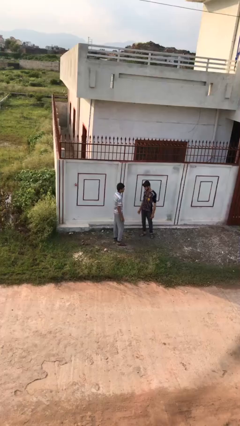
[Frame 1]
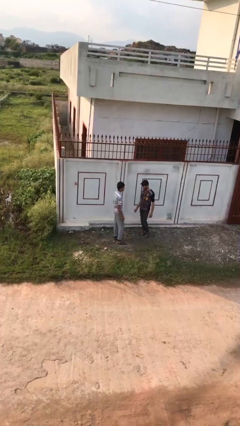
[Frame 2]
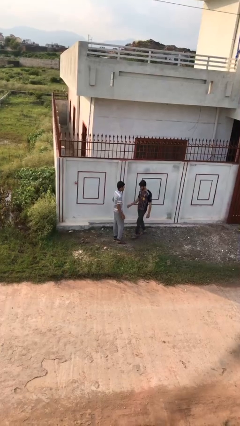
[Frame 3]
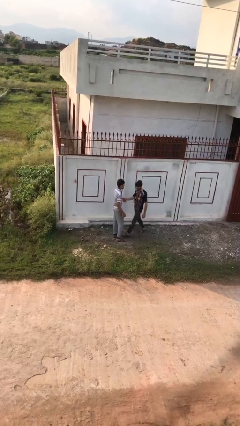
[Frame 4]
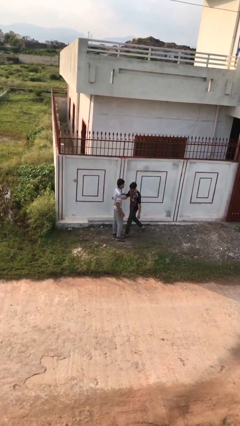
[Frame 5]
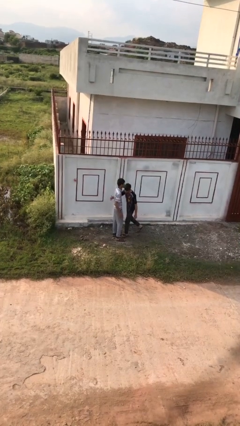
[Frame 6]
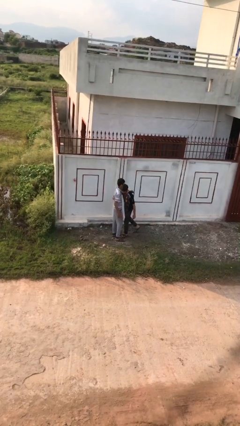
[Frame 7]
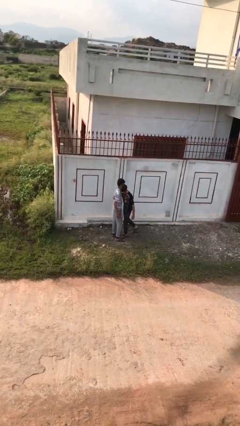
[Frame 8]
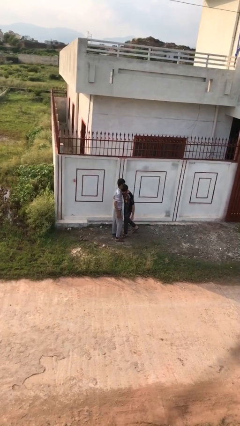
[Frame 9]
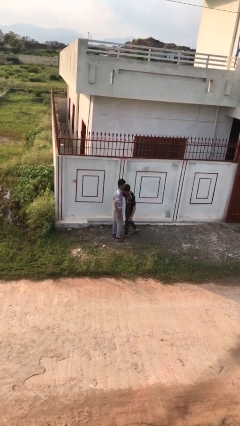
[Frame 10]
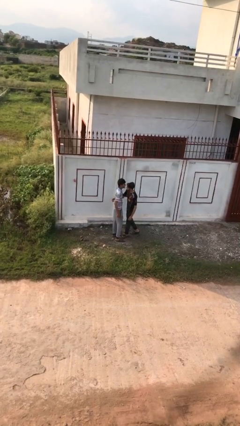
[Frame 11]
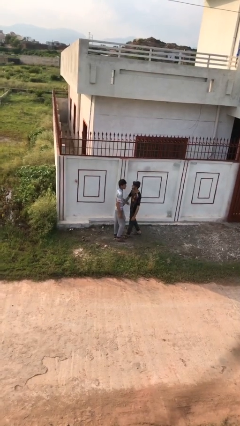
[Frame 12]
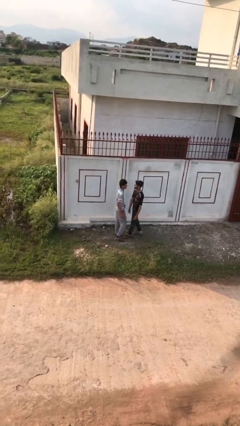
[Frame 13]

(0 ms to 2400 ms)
person embraces person

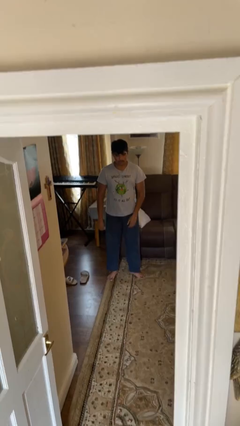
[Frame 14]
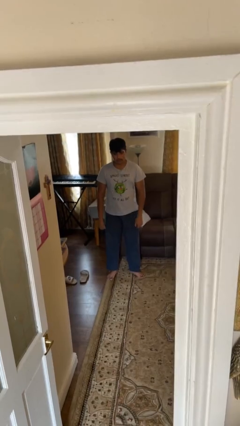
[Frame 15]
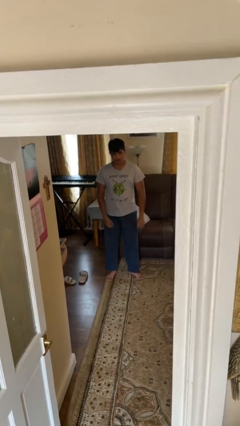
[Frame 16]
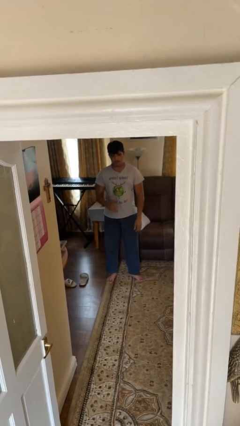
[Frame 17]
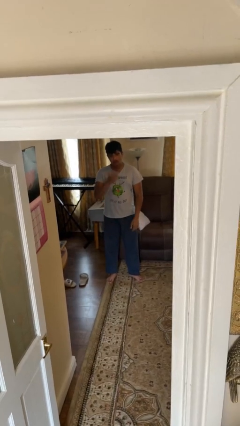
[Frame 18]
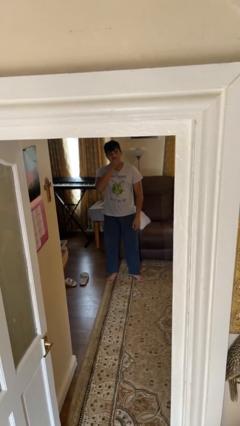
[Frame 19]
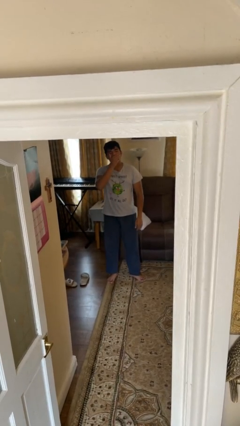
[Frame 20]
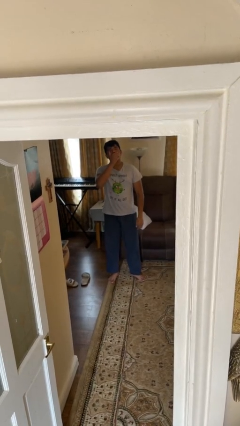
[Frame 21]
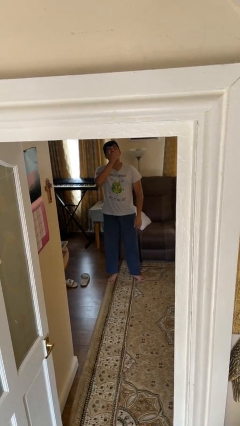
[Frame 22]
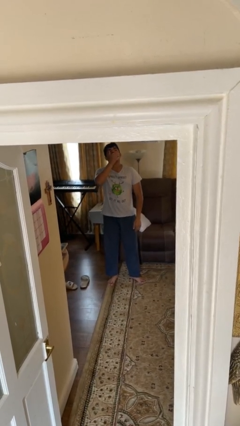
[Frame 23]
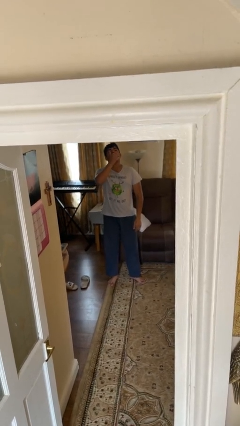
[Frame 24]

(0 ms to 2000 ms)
person yawns

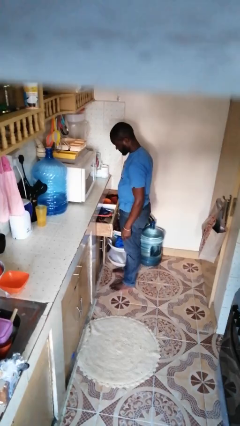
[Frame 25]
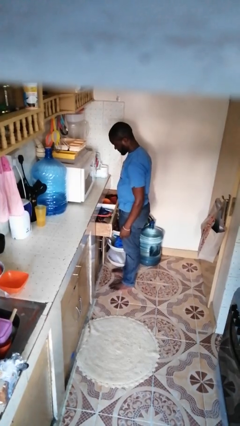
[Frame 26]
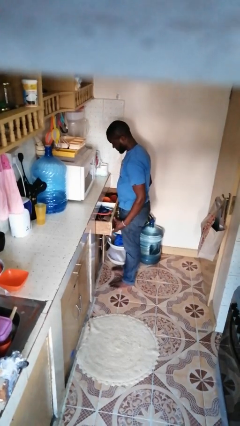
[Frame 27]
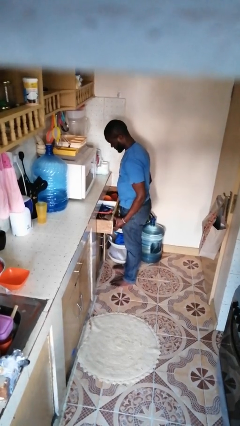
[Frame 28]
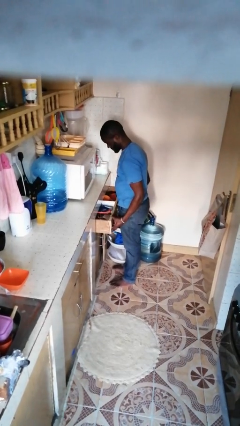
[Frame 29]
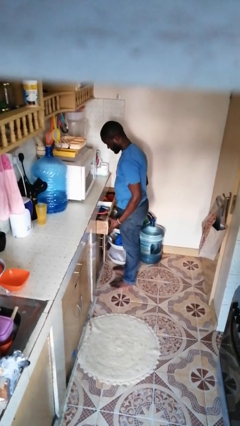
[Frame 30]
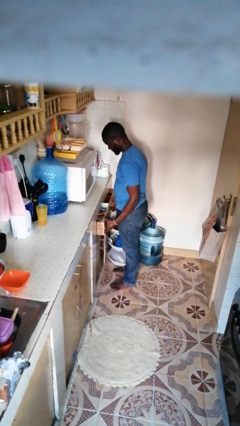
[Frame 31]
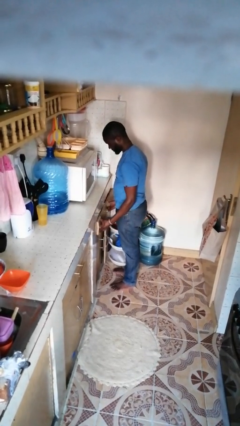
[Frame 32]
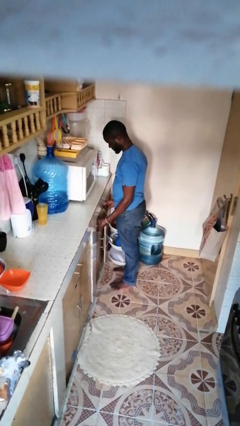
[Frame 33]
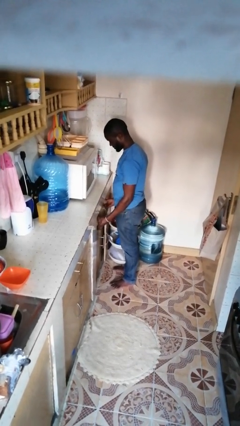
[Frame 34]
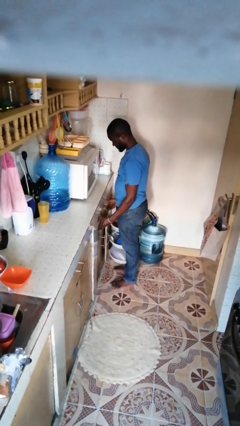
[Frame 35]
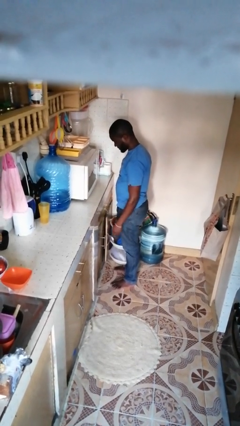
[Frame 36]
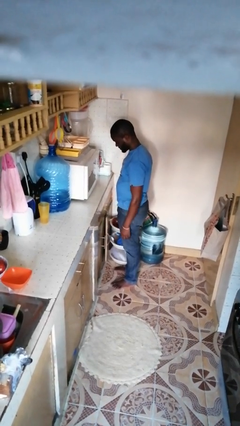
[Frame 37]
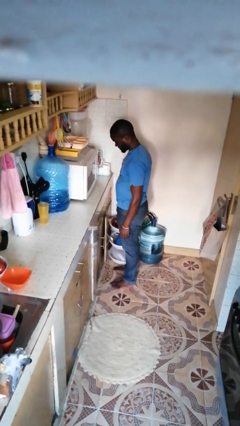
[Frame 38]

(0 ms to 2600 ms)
person closes kitchen drawer

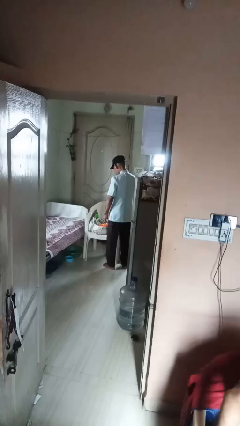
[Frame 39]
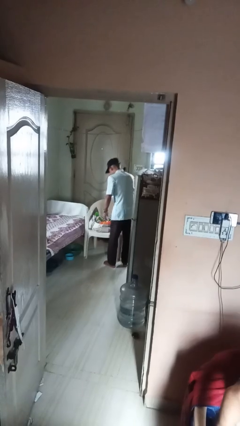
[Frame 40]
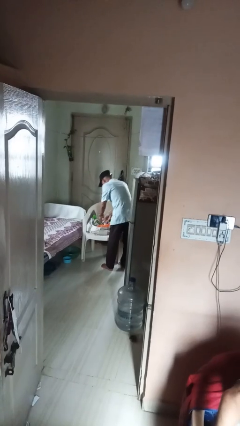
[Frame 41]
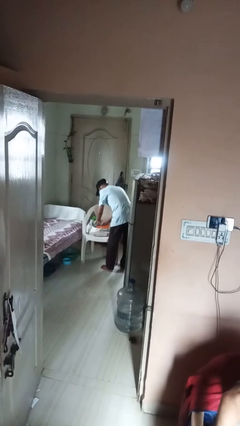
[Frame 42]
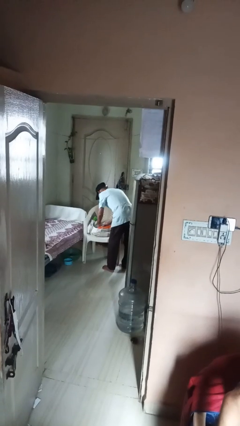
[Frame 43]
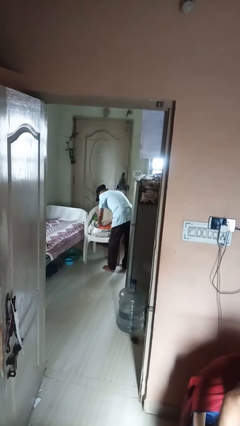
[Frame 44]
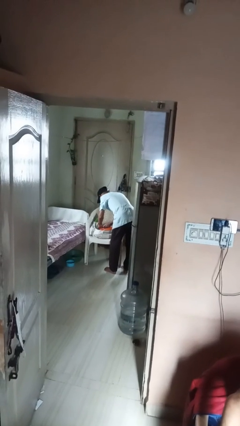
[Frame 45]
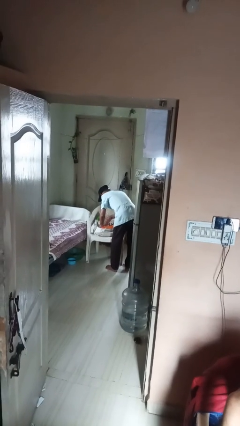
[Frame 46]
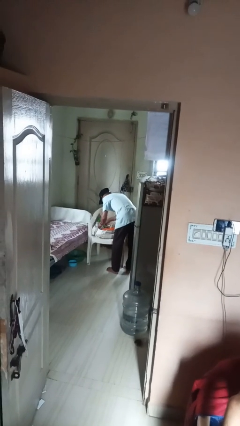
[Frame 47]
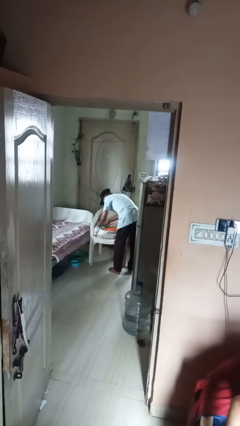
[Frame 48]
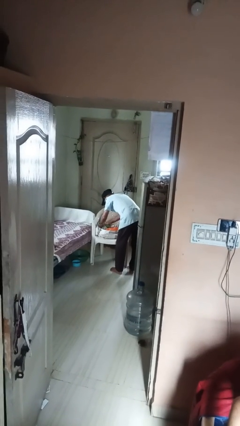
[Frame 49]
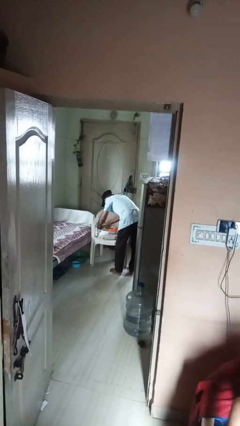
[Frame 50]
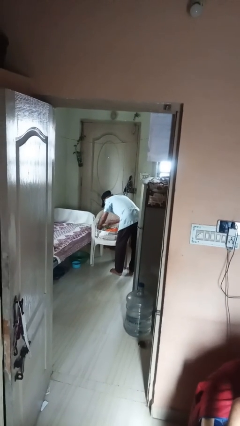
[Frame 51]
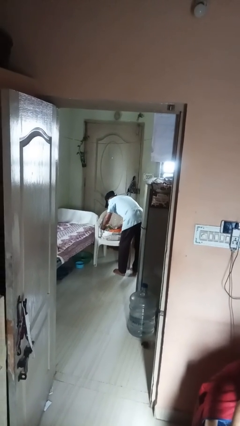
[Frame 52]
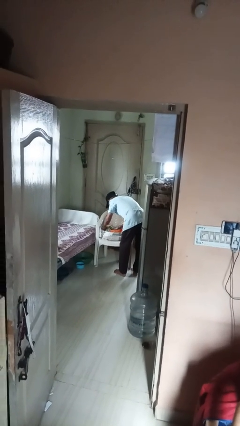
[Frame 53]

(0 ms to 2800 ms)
person searches in bag

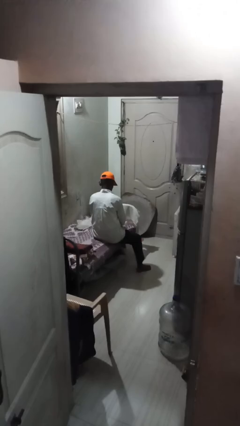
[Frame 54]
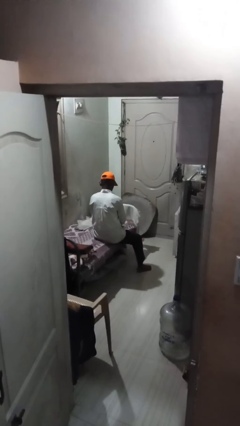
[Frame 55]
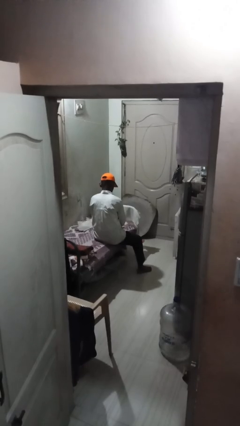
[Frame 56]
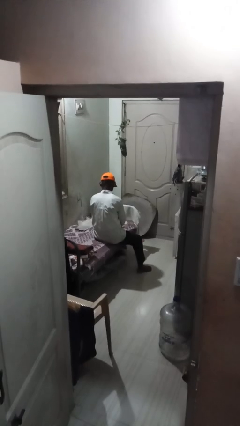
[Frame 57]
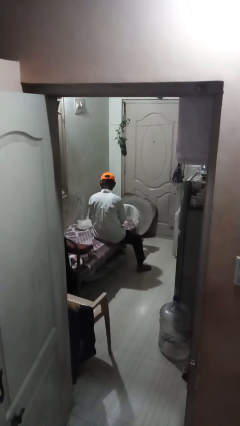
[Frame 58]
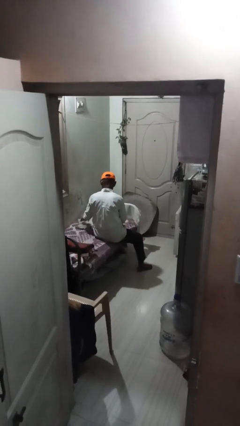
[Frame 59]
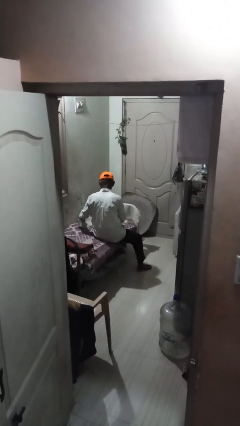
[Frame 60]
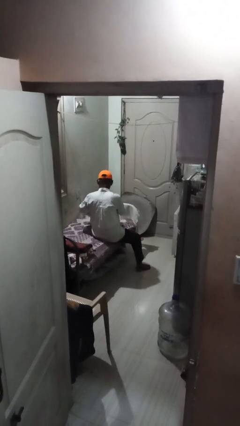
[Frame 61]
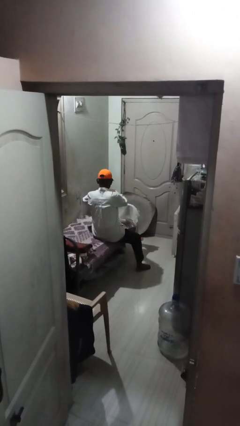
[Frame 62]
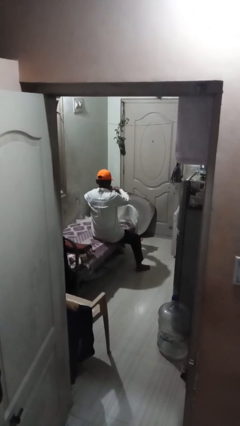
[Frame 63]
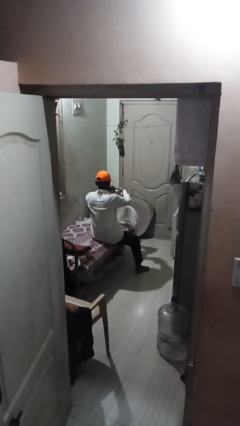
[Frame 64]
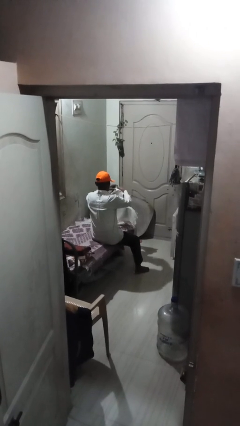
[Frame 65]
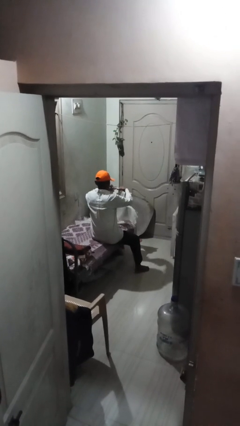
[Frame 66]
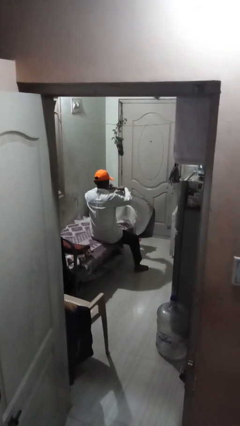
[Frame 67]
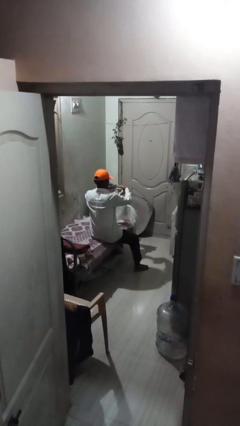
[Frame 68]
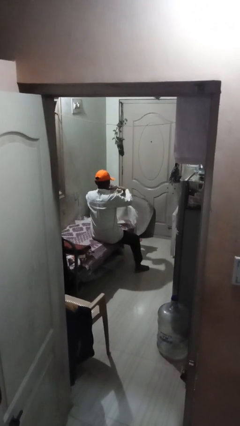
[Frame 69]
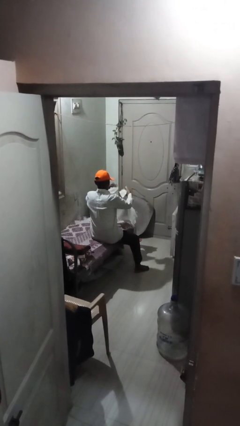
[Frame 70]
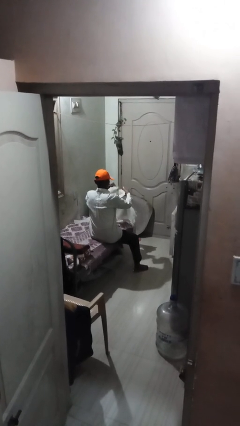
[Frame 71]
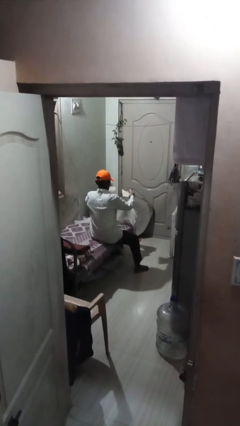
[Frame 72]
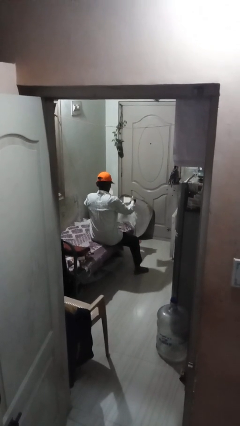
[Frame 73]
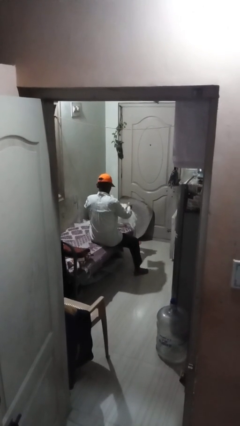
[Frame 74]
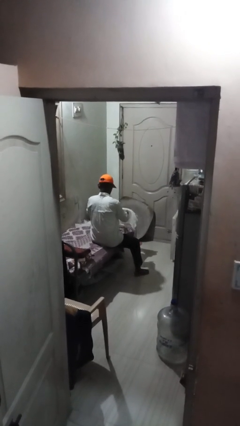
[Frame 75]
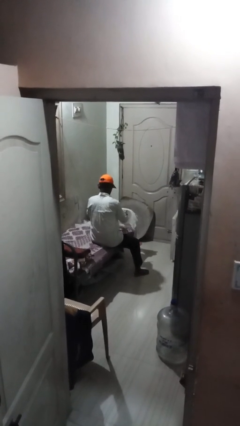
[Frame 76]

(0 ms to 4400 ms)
person tears paper

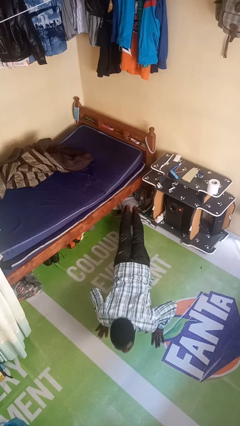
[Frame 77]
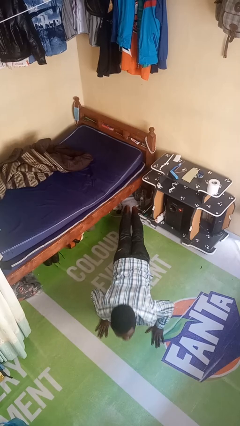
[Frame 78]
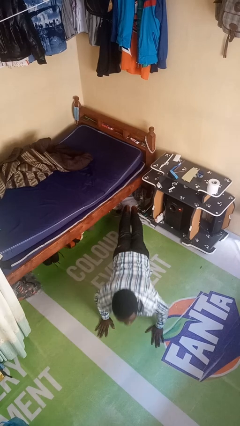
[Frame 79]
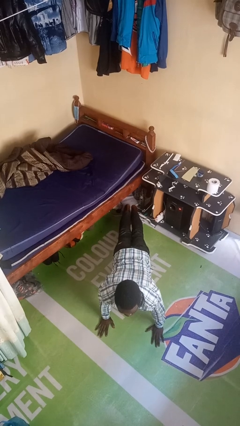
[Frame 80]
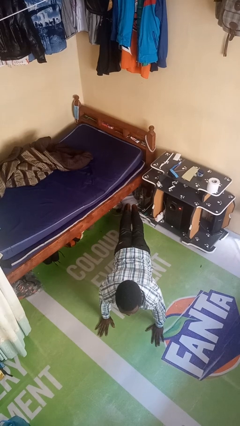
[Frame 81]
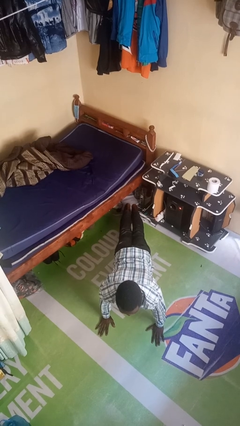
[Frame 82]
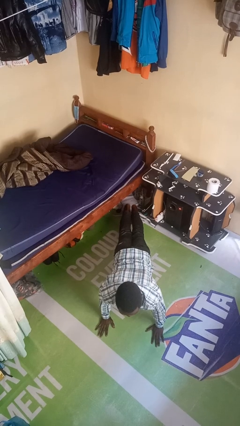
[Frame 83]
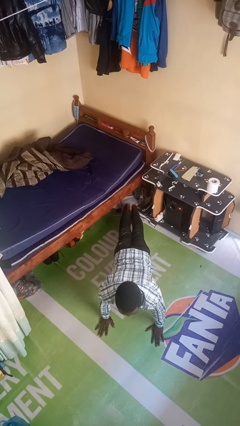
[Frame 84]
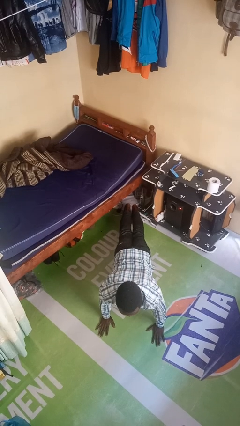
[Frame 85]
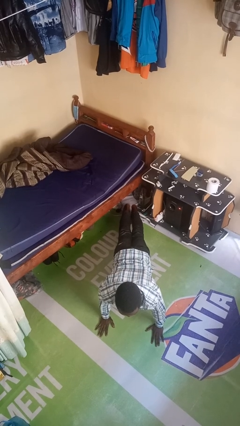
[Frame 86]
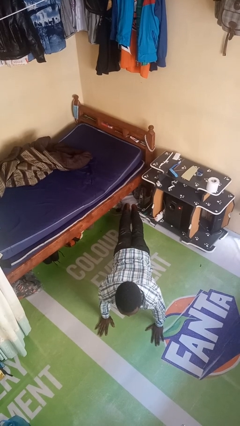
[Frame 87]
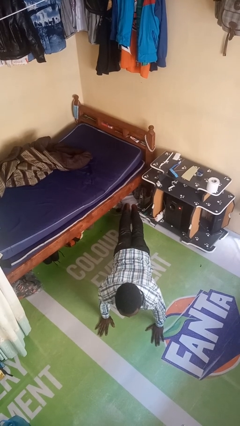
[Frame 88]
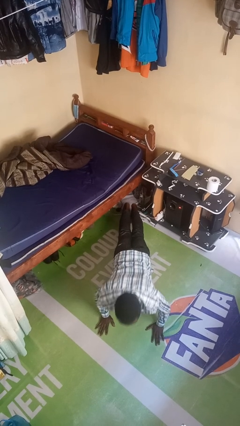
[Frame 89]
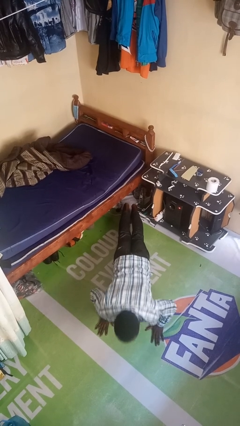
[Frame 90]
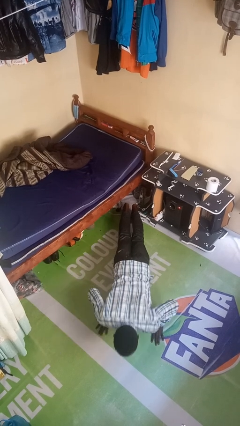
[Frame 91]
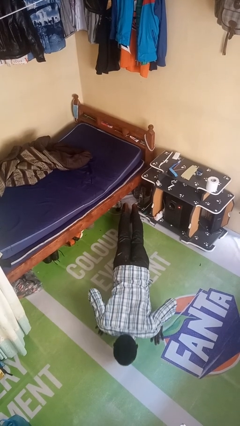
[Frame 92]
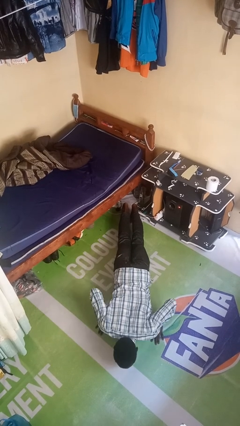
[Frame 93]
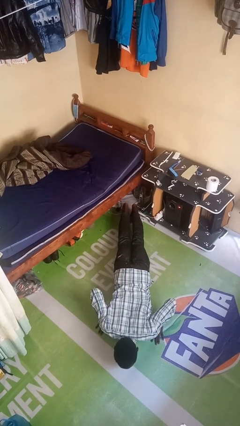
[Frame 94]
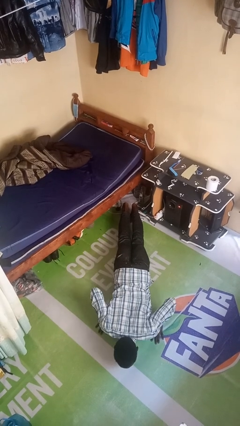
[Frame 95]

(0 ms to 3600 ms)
person exercises with pushup
